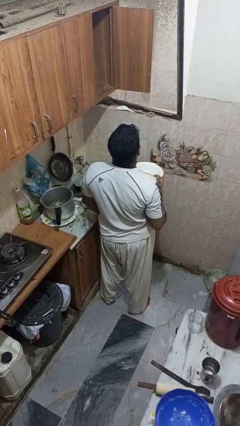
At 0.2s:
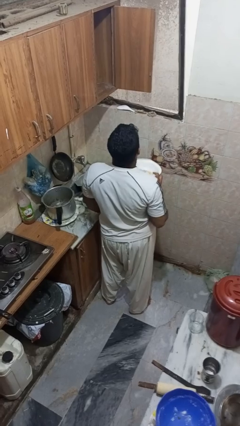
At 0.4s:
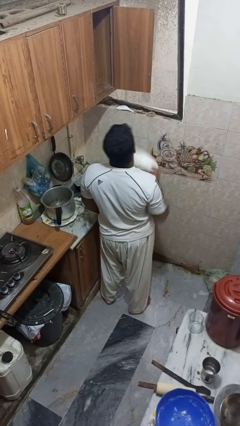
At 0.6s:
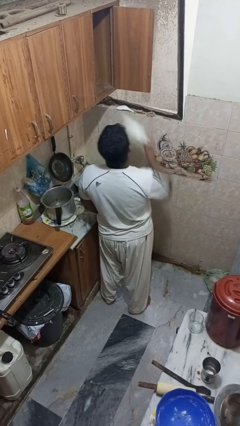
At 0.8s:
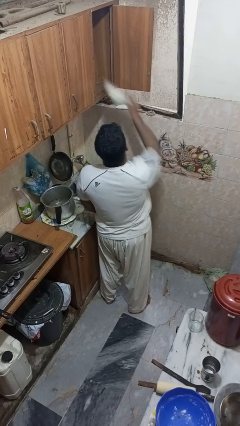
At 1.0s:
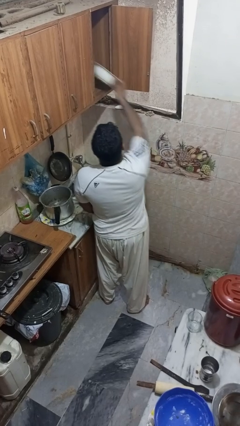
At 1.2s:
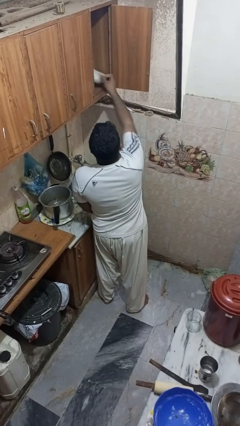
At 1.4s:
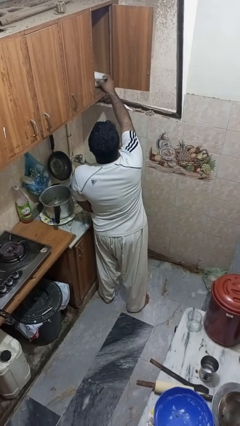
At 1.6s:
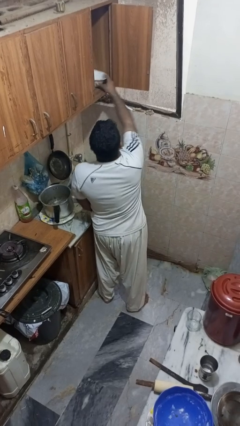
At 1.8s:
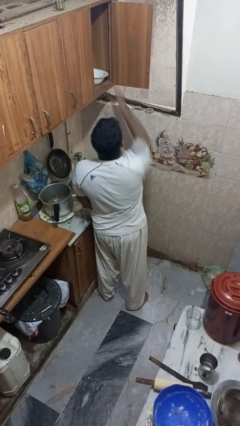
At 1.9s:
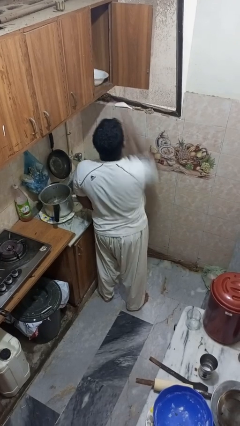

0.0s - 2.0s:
person puts object in cabinet

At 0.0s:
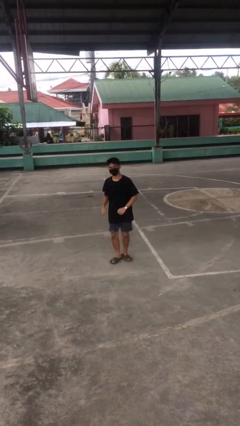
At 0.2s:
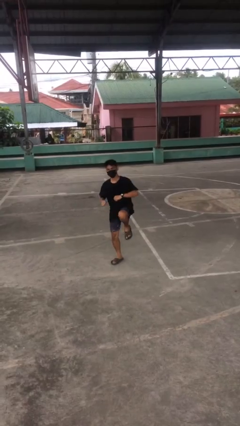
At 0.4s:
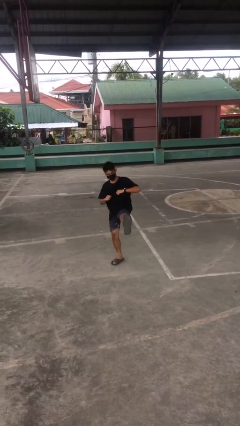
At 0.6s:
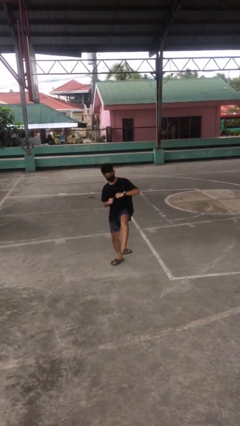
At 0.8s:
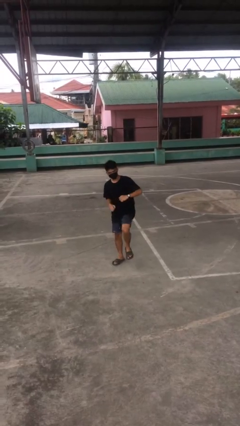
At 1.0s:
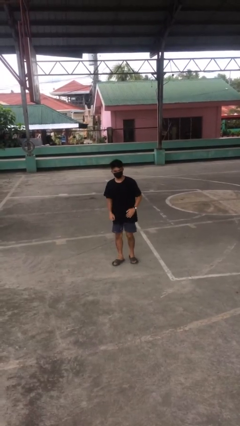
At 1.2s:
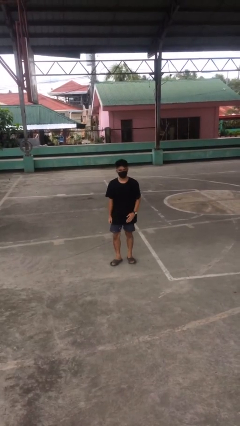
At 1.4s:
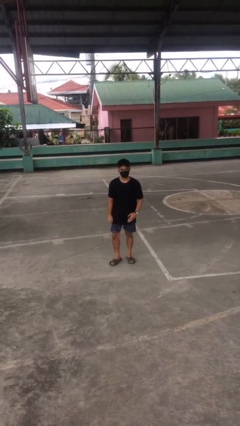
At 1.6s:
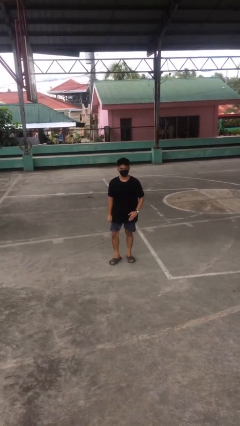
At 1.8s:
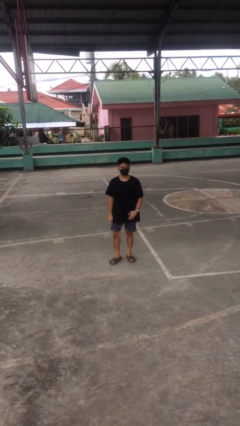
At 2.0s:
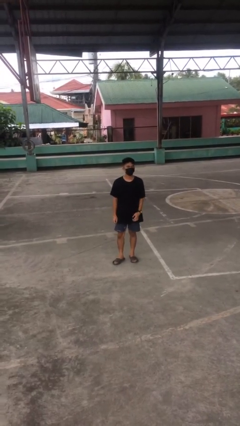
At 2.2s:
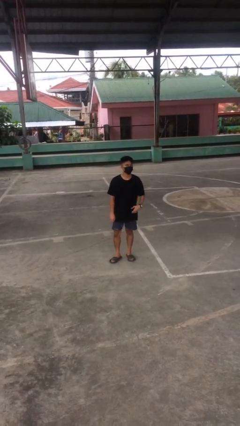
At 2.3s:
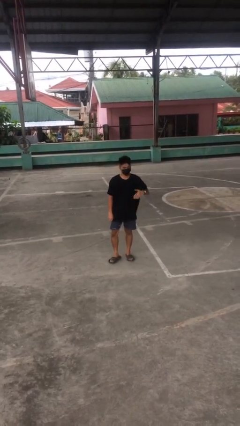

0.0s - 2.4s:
person karate kicks

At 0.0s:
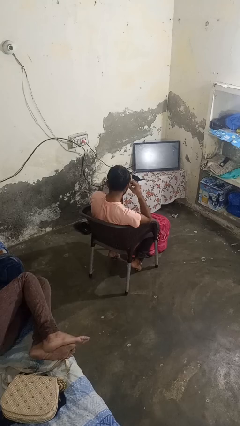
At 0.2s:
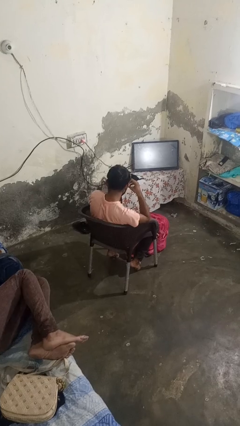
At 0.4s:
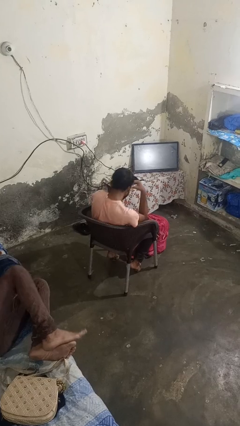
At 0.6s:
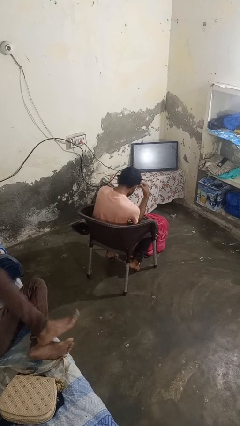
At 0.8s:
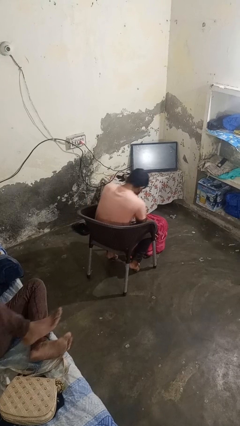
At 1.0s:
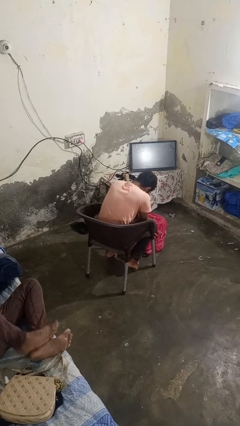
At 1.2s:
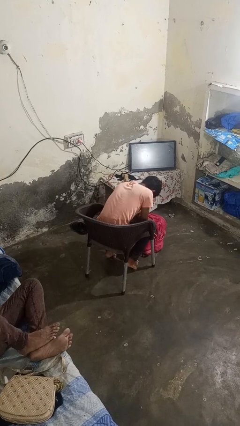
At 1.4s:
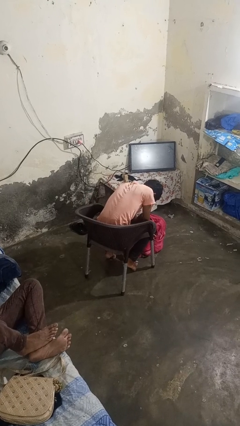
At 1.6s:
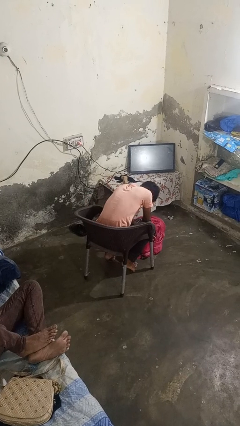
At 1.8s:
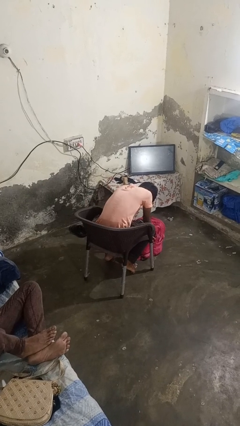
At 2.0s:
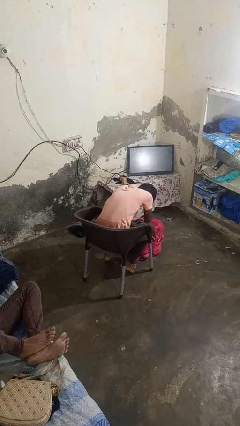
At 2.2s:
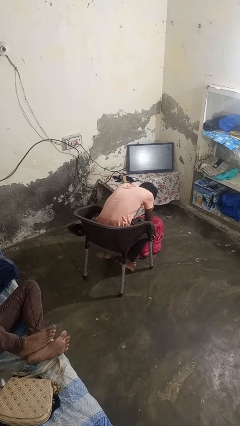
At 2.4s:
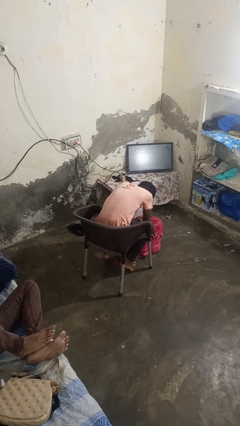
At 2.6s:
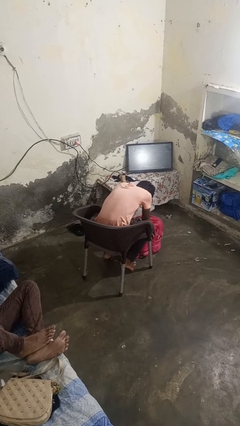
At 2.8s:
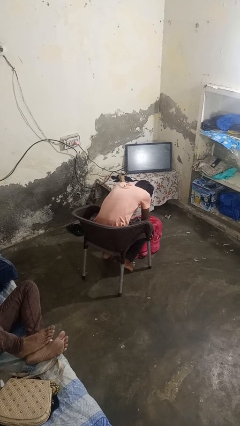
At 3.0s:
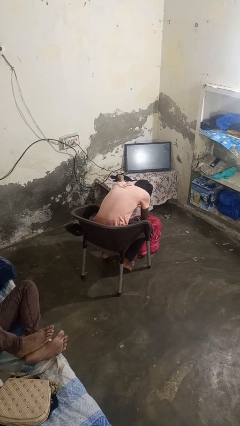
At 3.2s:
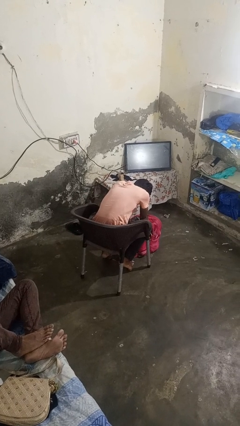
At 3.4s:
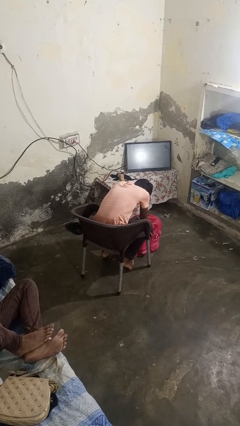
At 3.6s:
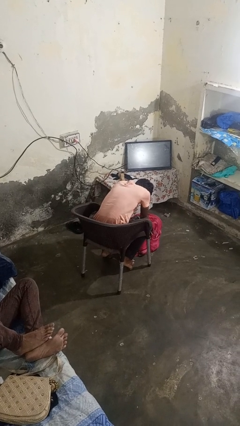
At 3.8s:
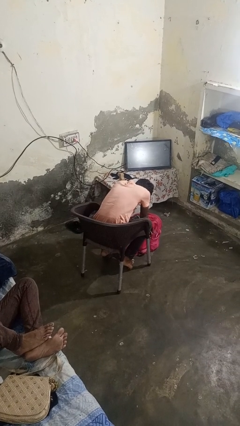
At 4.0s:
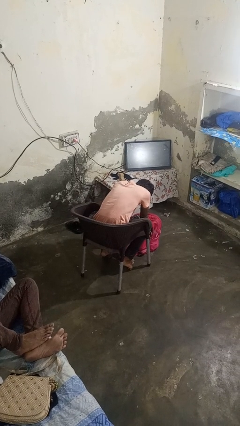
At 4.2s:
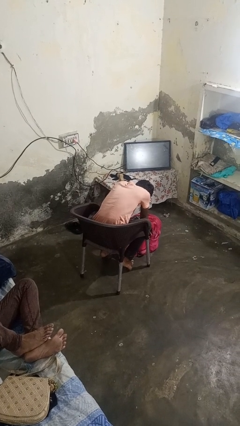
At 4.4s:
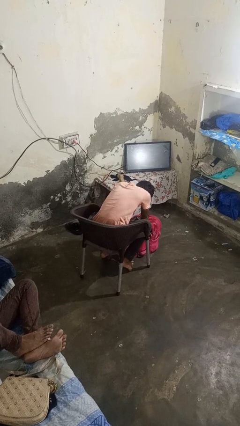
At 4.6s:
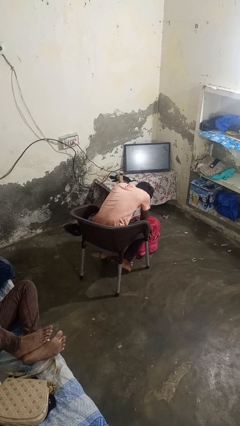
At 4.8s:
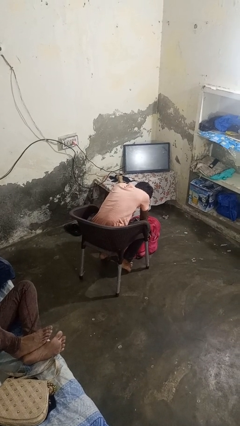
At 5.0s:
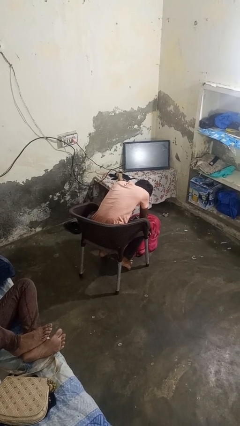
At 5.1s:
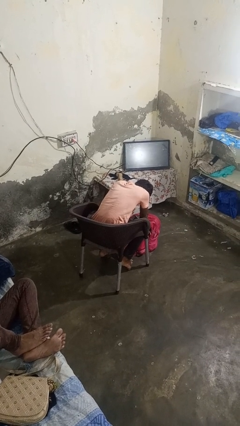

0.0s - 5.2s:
person searches in backpack

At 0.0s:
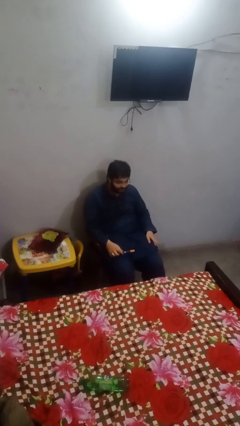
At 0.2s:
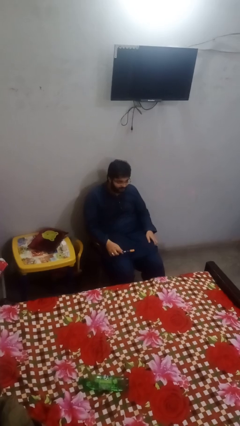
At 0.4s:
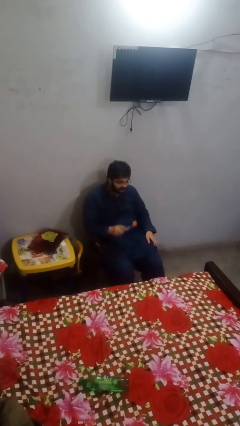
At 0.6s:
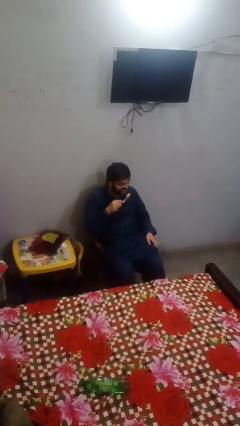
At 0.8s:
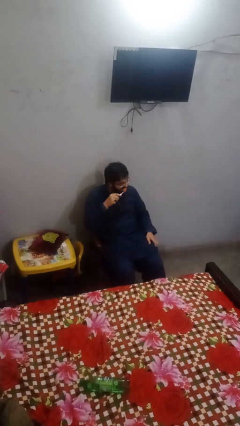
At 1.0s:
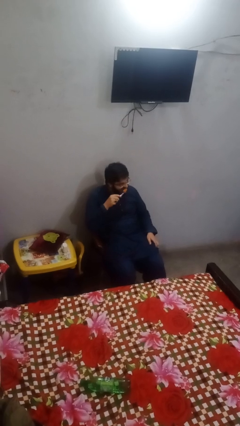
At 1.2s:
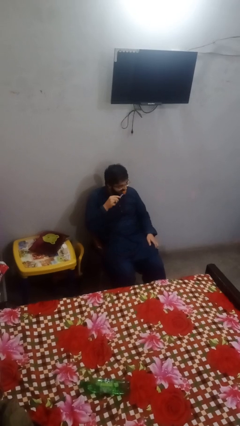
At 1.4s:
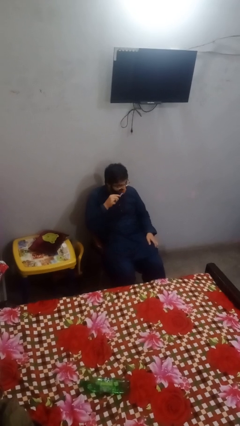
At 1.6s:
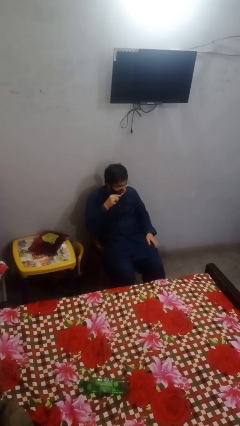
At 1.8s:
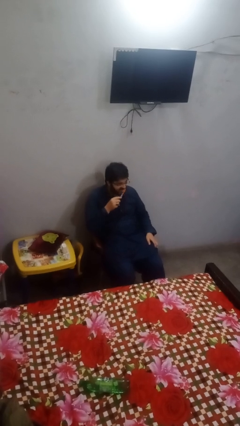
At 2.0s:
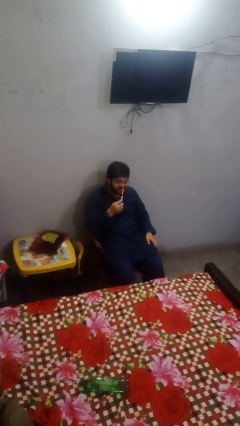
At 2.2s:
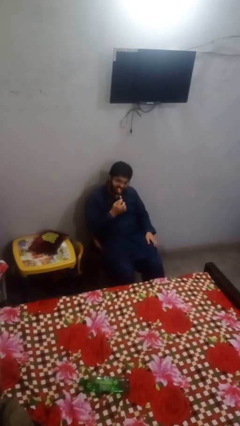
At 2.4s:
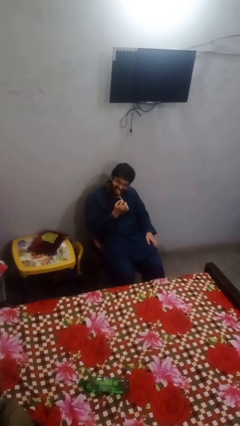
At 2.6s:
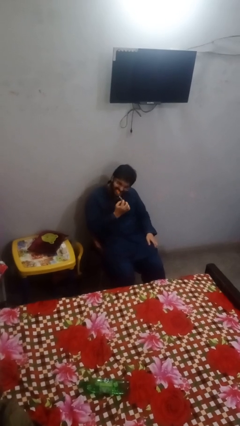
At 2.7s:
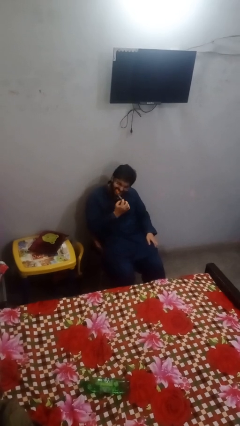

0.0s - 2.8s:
person brushes teeth

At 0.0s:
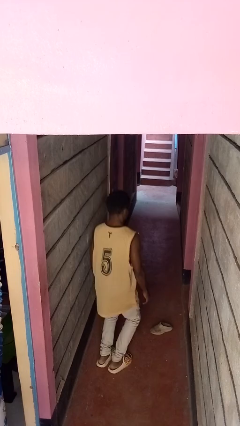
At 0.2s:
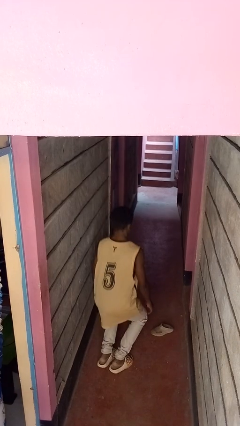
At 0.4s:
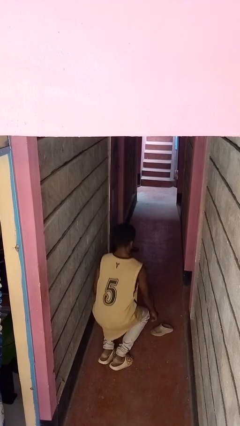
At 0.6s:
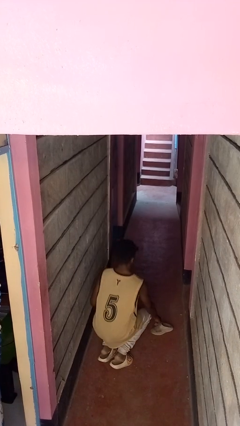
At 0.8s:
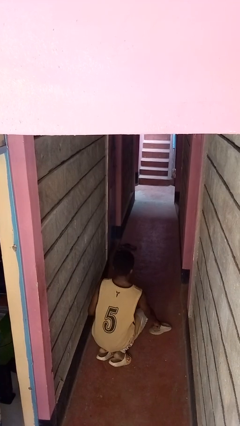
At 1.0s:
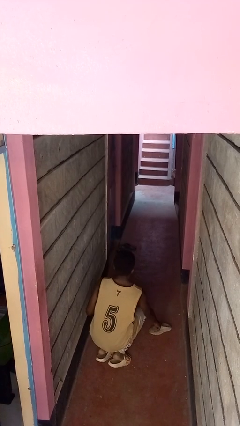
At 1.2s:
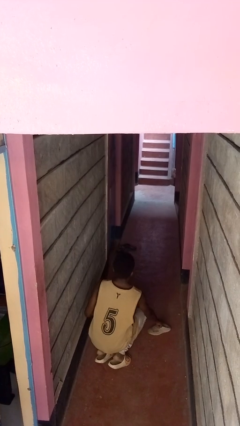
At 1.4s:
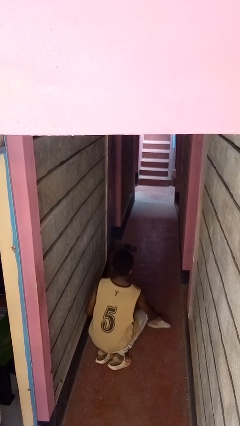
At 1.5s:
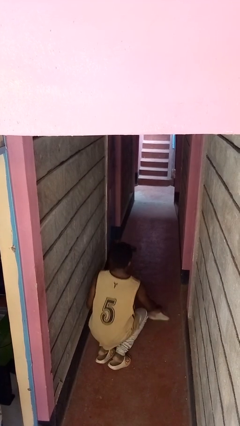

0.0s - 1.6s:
person picks up object from floor

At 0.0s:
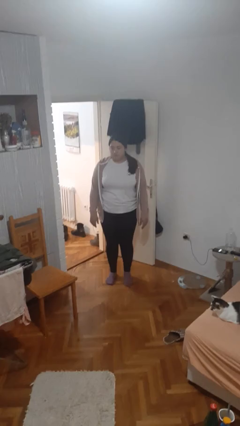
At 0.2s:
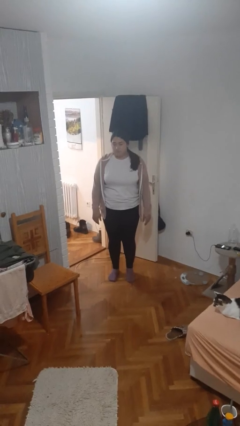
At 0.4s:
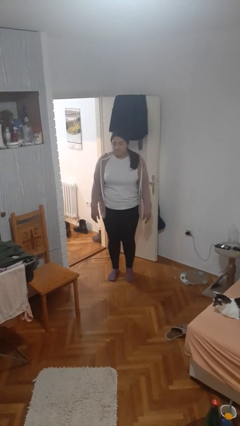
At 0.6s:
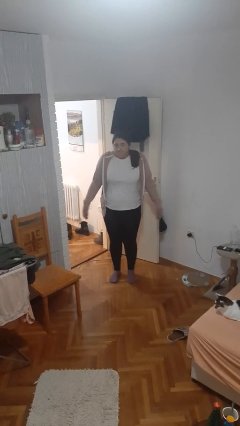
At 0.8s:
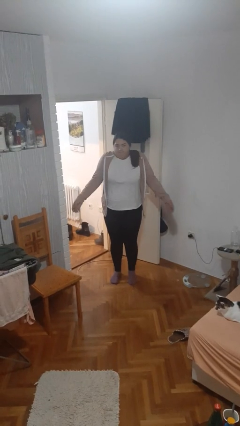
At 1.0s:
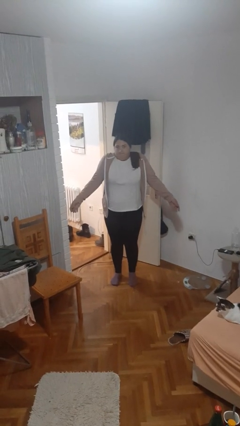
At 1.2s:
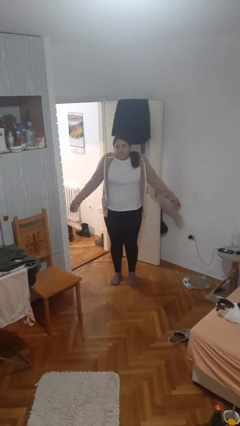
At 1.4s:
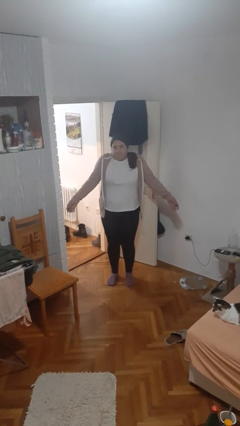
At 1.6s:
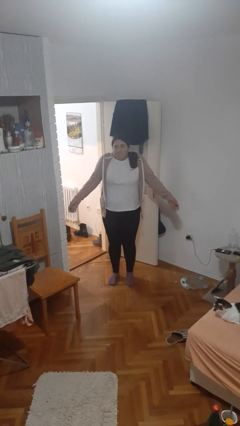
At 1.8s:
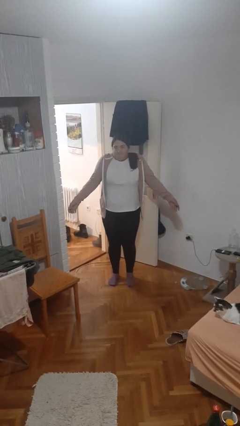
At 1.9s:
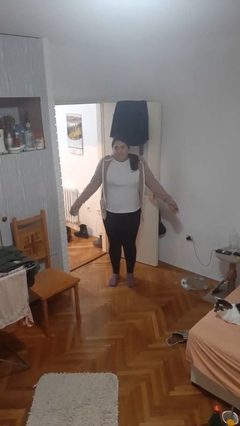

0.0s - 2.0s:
person shrugs

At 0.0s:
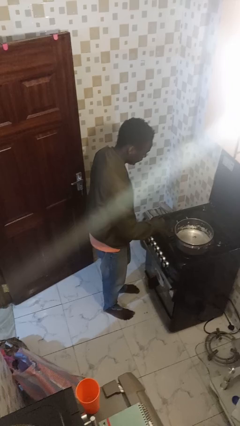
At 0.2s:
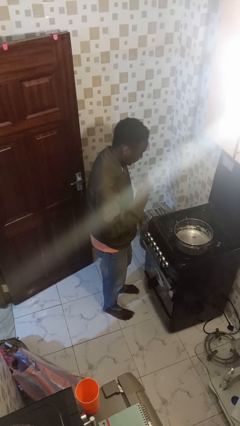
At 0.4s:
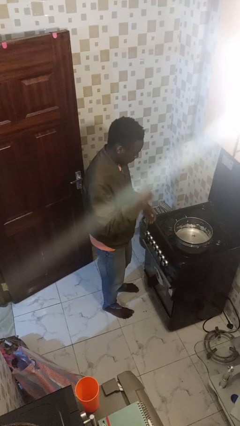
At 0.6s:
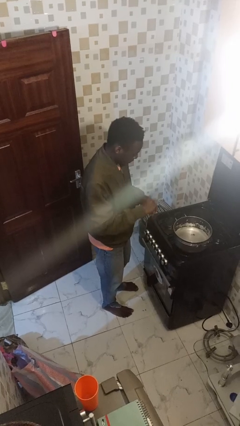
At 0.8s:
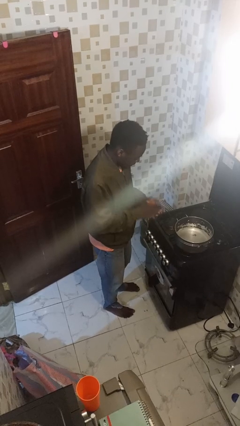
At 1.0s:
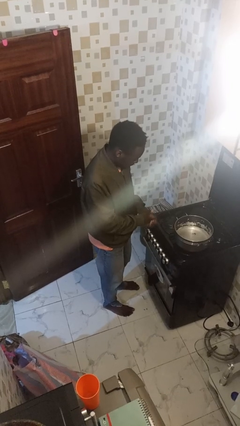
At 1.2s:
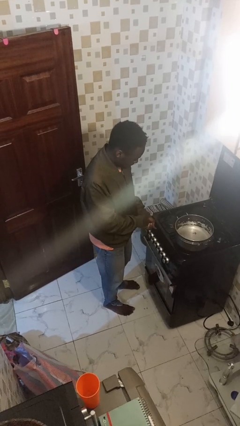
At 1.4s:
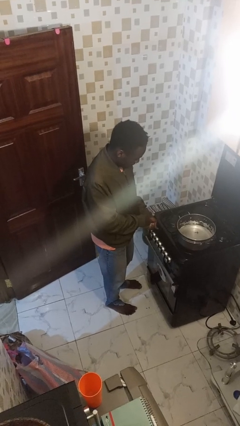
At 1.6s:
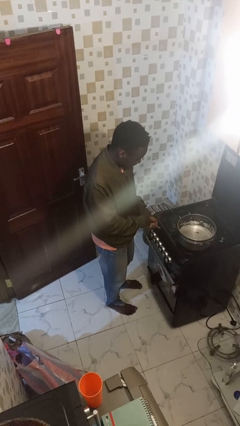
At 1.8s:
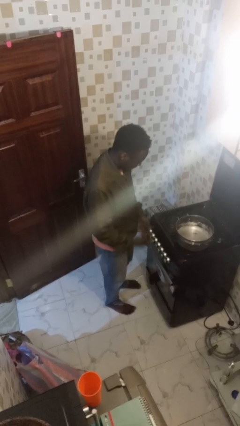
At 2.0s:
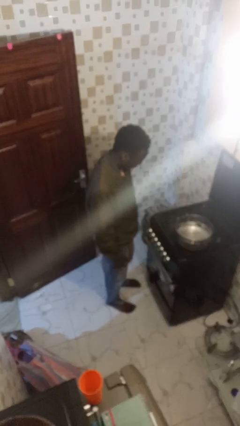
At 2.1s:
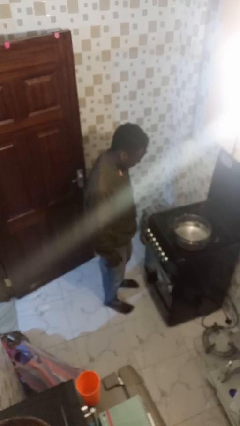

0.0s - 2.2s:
person burns hand
